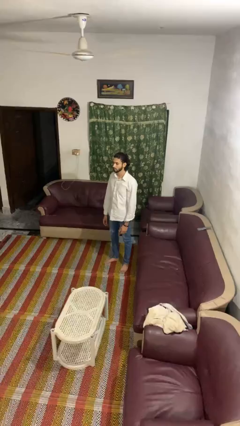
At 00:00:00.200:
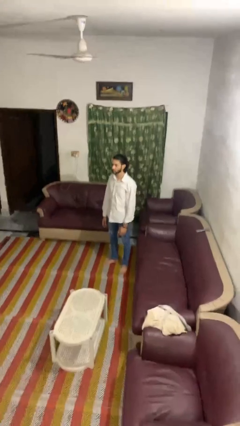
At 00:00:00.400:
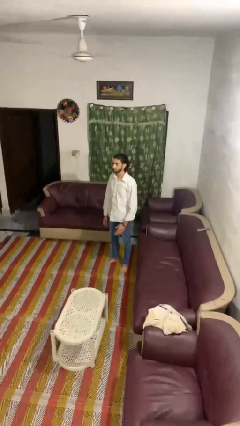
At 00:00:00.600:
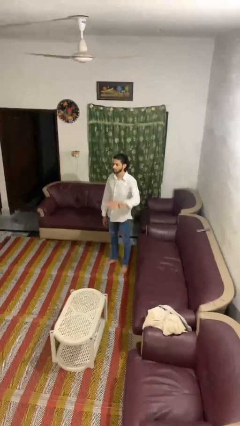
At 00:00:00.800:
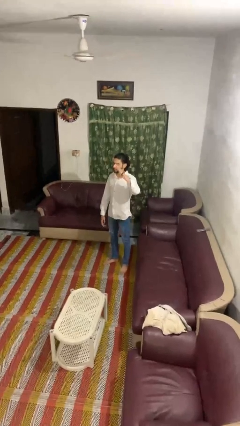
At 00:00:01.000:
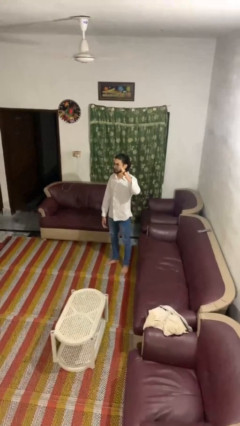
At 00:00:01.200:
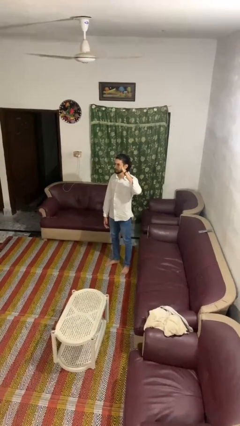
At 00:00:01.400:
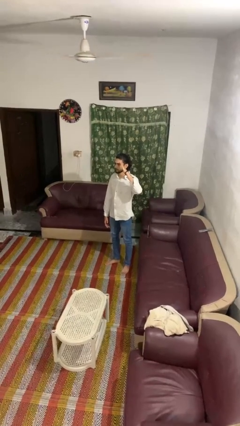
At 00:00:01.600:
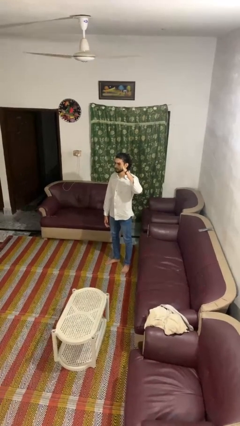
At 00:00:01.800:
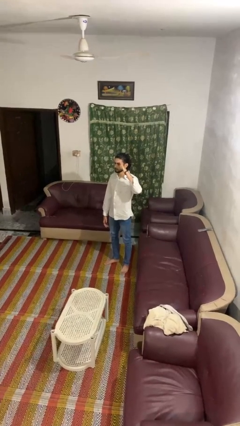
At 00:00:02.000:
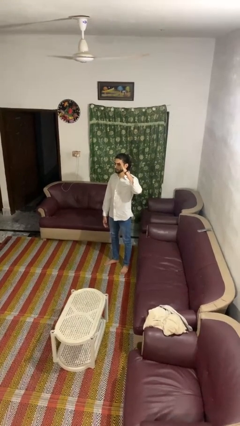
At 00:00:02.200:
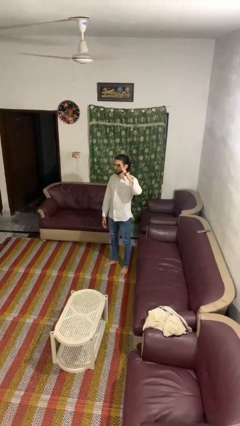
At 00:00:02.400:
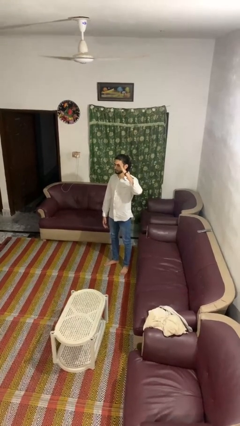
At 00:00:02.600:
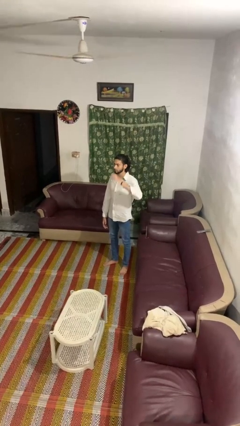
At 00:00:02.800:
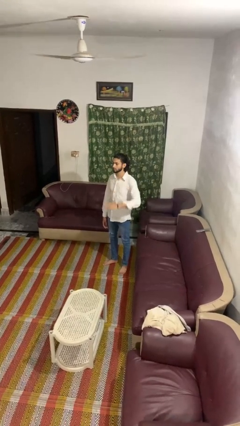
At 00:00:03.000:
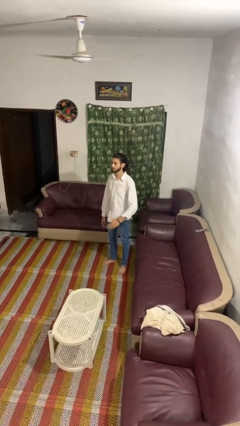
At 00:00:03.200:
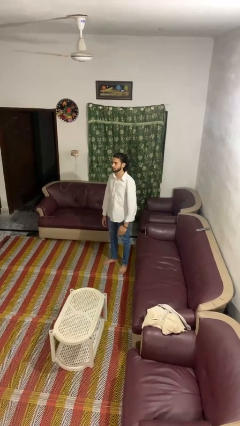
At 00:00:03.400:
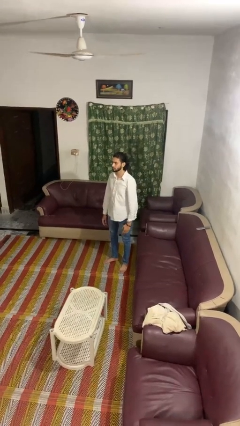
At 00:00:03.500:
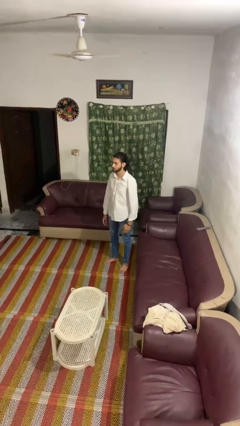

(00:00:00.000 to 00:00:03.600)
person salutes

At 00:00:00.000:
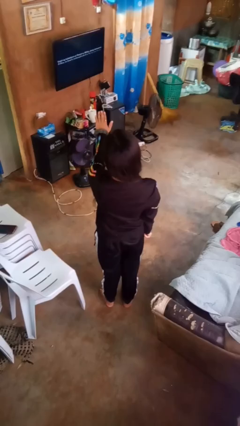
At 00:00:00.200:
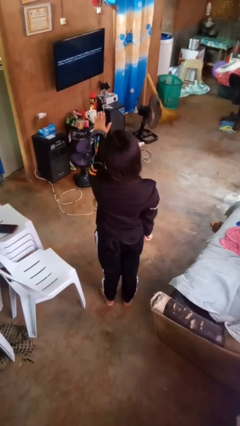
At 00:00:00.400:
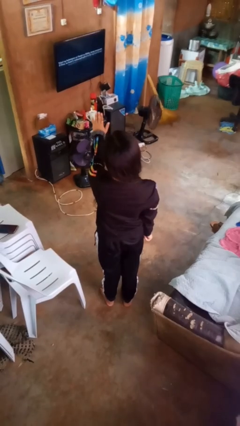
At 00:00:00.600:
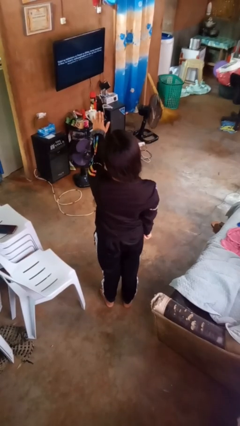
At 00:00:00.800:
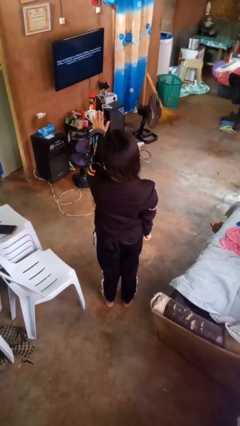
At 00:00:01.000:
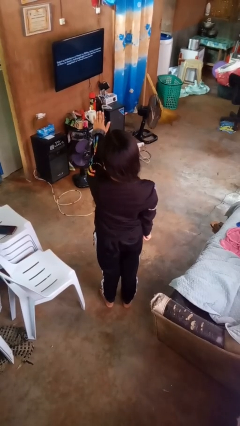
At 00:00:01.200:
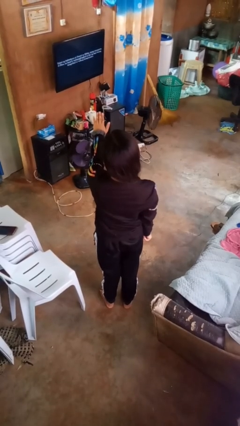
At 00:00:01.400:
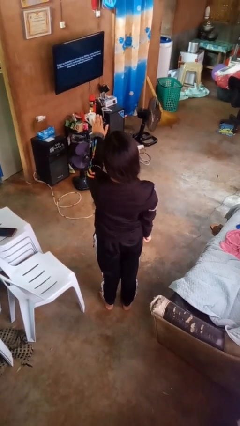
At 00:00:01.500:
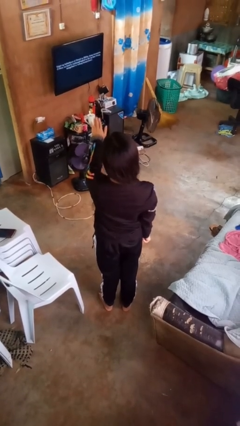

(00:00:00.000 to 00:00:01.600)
person gestures stop

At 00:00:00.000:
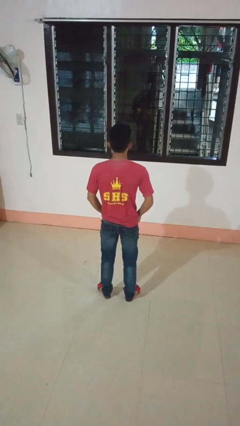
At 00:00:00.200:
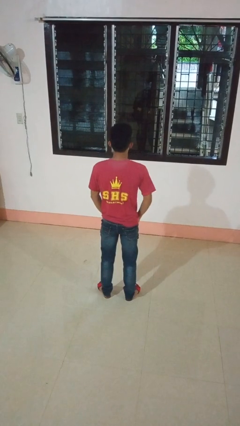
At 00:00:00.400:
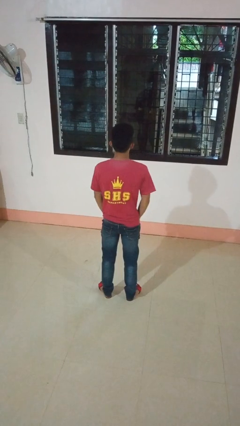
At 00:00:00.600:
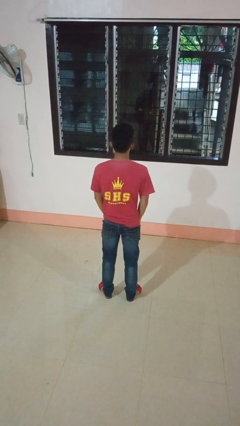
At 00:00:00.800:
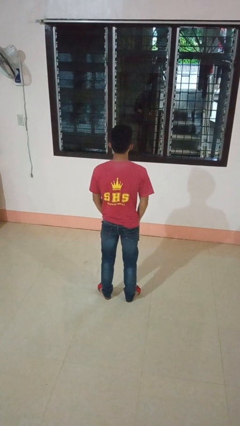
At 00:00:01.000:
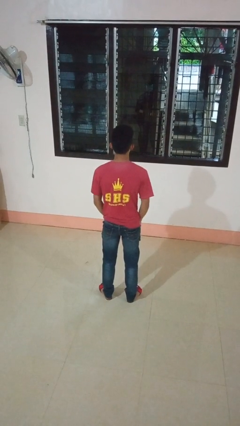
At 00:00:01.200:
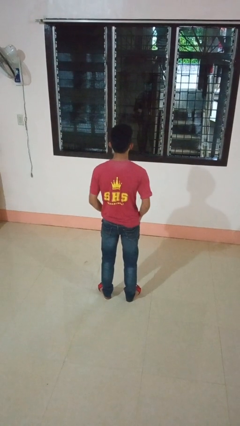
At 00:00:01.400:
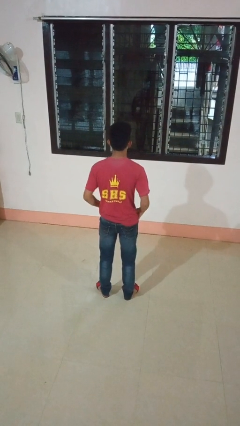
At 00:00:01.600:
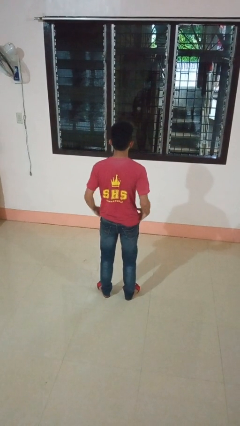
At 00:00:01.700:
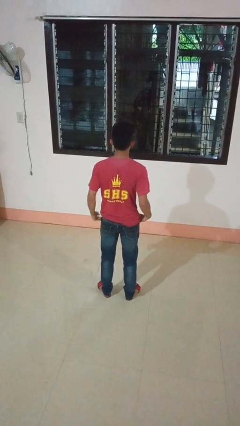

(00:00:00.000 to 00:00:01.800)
person puts hands in back pockets

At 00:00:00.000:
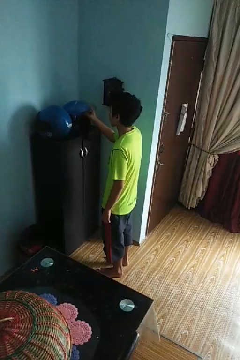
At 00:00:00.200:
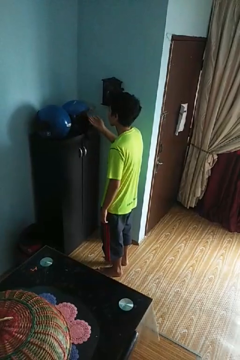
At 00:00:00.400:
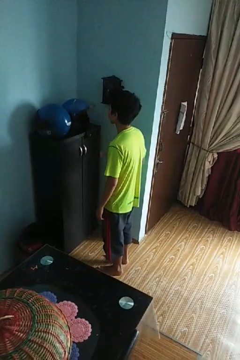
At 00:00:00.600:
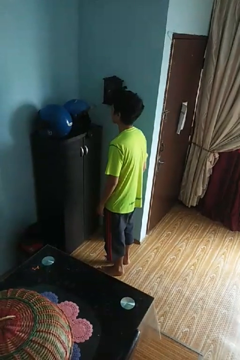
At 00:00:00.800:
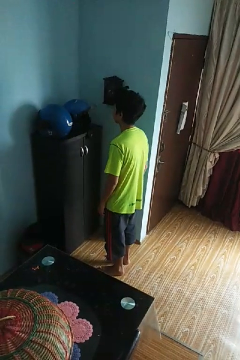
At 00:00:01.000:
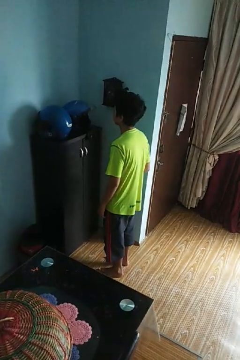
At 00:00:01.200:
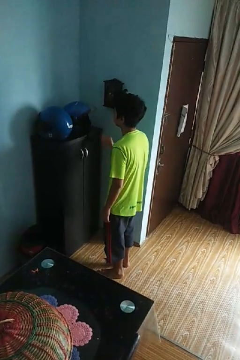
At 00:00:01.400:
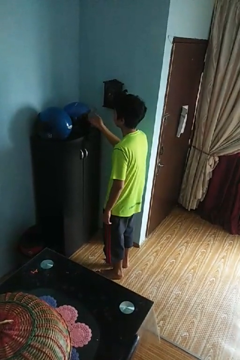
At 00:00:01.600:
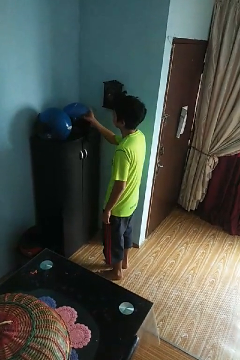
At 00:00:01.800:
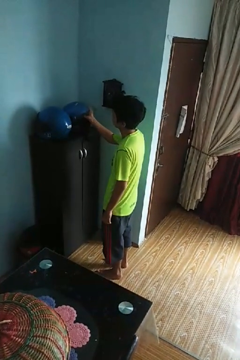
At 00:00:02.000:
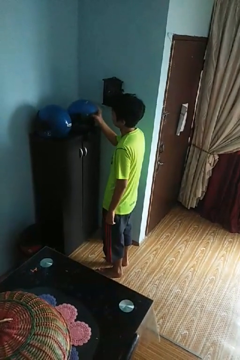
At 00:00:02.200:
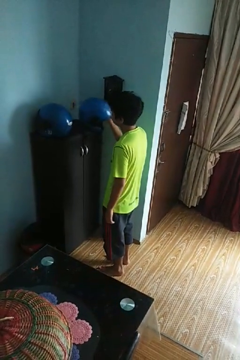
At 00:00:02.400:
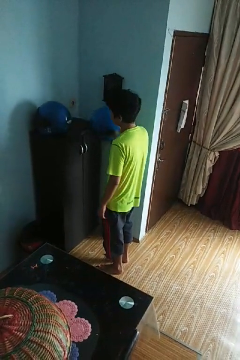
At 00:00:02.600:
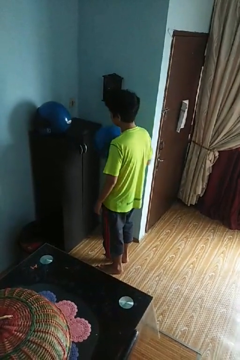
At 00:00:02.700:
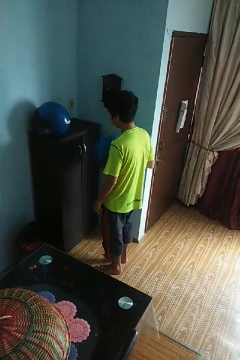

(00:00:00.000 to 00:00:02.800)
person picks up object from countertop

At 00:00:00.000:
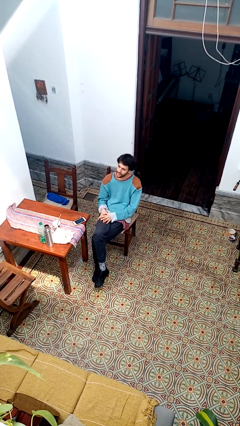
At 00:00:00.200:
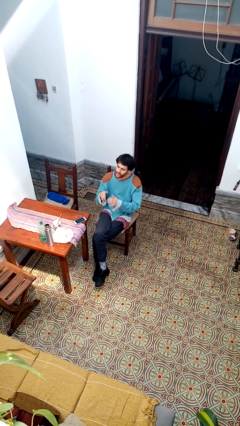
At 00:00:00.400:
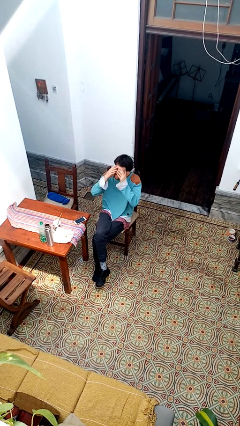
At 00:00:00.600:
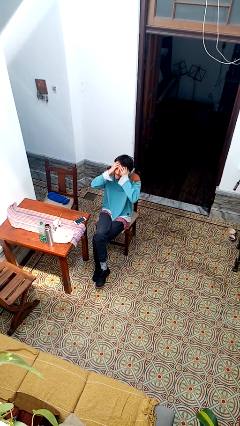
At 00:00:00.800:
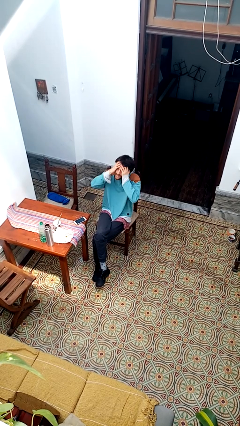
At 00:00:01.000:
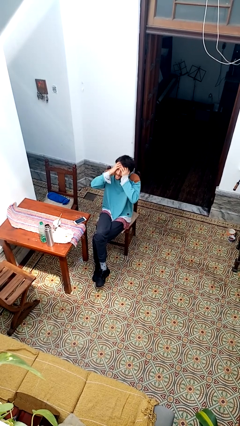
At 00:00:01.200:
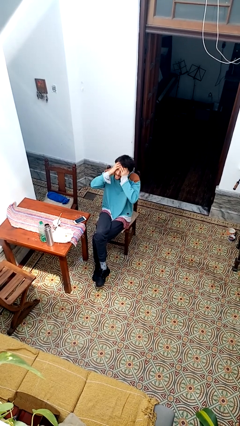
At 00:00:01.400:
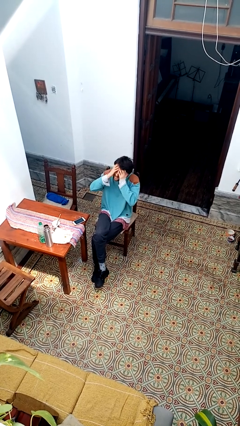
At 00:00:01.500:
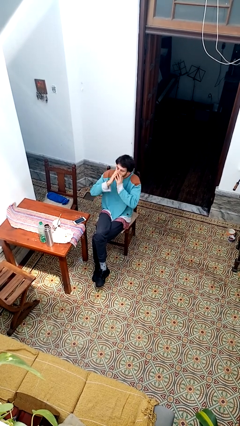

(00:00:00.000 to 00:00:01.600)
person covers face with hands

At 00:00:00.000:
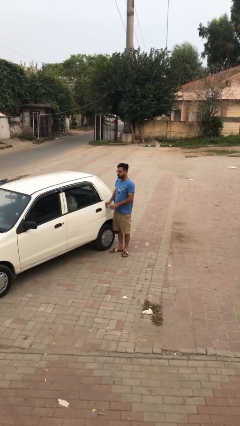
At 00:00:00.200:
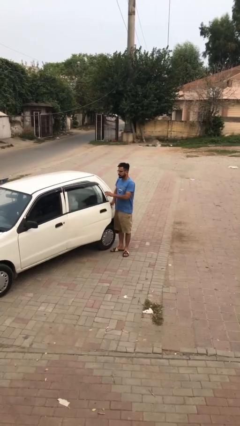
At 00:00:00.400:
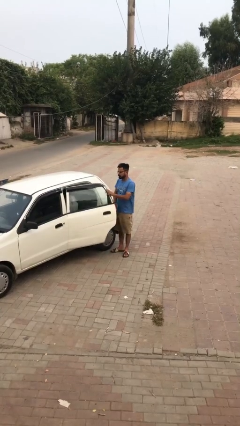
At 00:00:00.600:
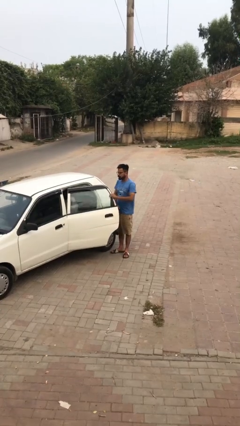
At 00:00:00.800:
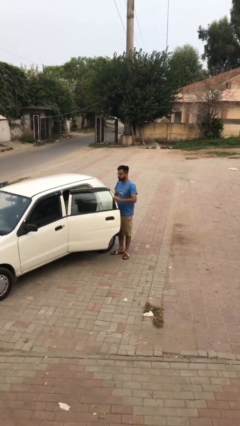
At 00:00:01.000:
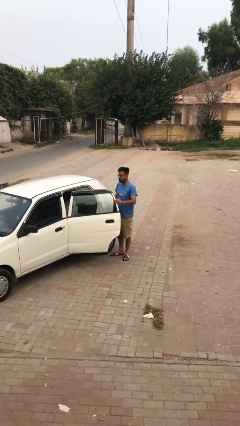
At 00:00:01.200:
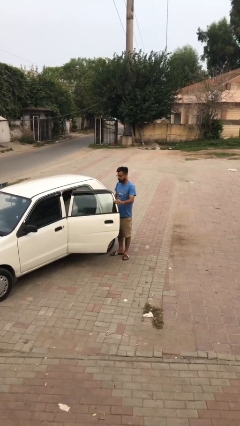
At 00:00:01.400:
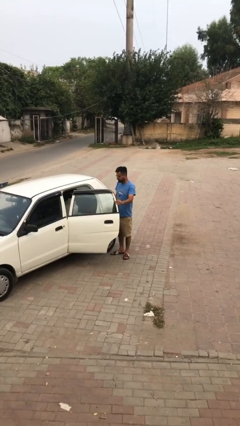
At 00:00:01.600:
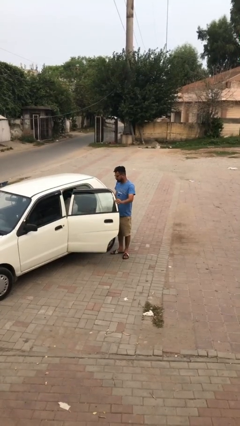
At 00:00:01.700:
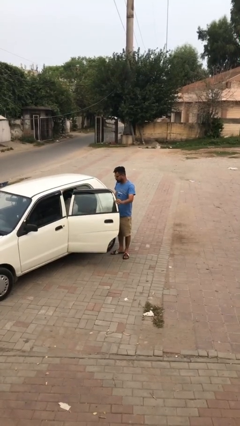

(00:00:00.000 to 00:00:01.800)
person opens car door

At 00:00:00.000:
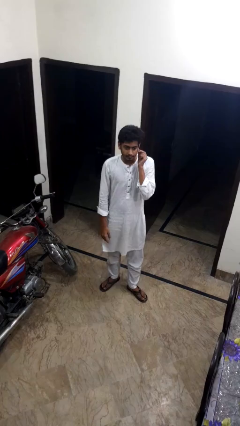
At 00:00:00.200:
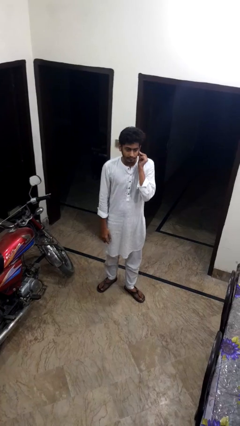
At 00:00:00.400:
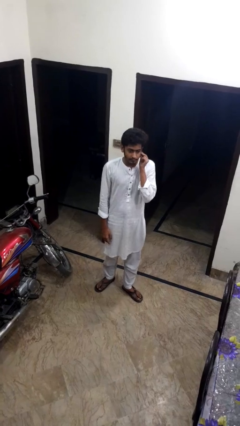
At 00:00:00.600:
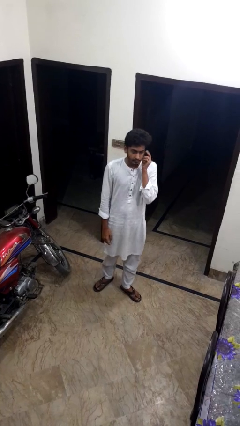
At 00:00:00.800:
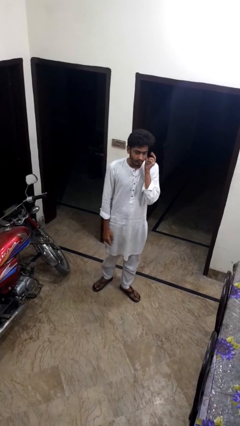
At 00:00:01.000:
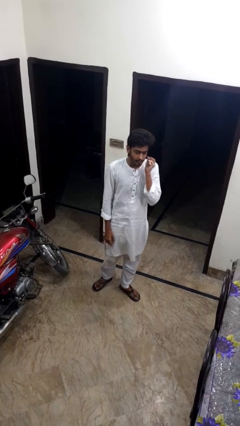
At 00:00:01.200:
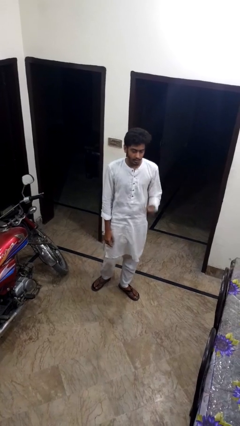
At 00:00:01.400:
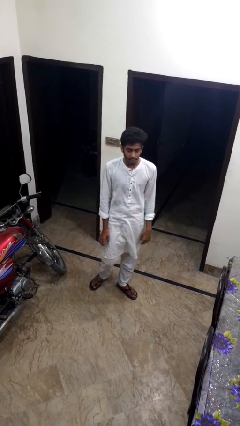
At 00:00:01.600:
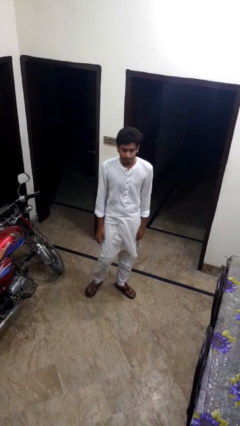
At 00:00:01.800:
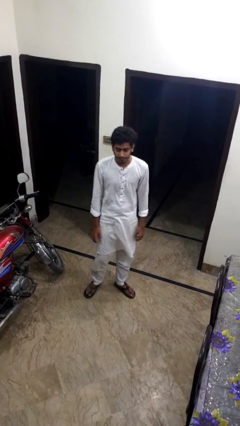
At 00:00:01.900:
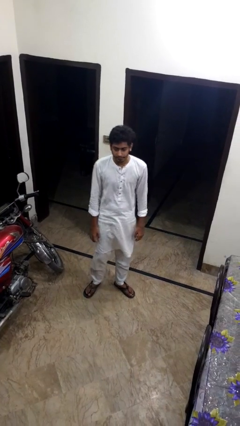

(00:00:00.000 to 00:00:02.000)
person touches earlobe

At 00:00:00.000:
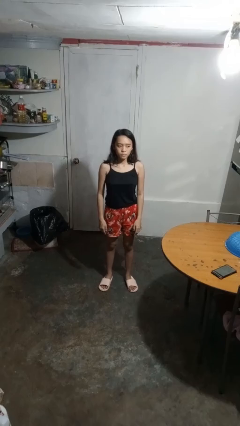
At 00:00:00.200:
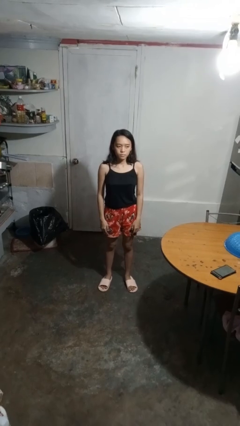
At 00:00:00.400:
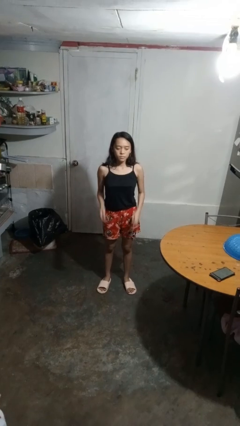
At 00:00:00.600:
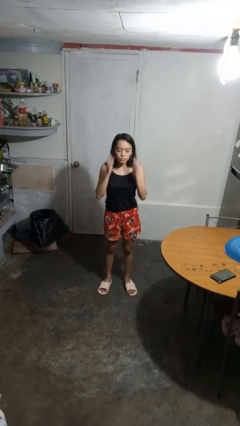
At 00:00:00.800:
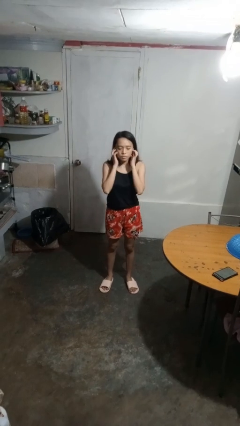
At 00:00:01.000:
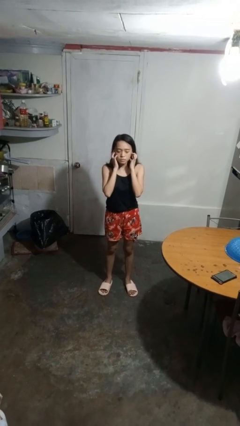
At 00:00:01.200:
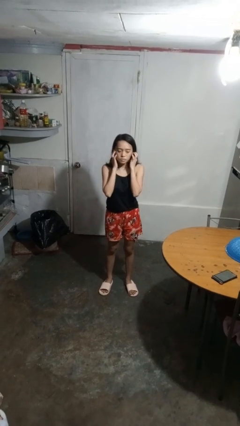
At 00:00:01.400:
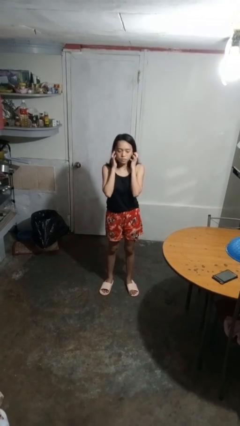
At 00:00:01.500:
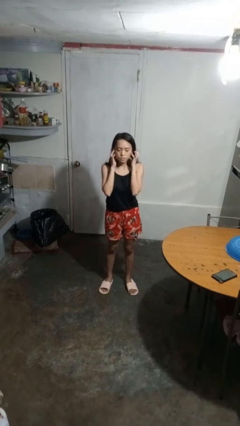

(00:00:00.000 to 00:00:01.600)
person puts fingers in ear

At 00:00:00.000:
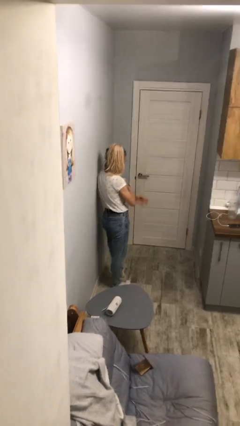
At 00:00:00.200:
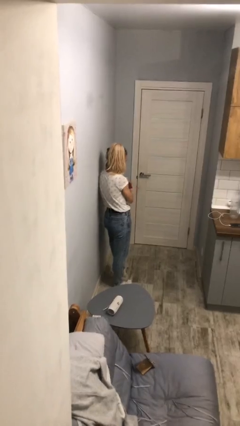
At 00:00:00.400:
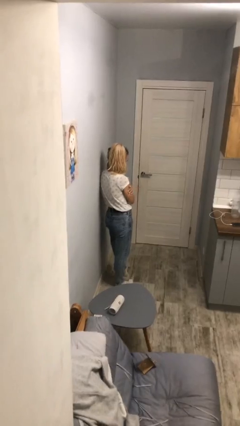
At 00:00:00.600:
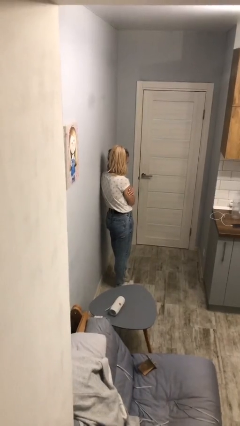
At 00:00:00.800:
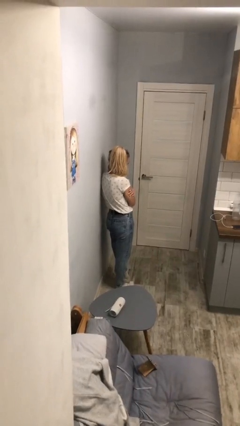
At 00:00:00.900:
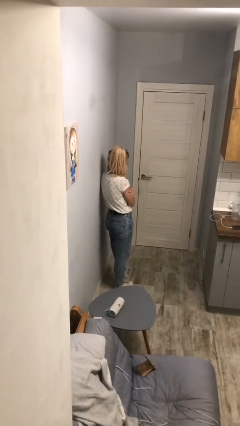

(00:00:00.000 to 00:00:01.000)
person crosses arms
